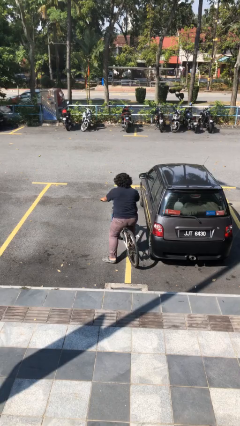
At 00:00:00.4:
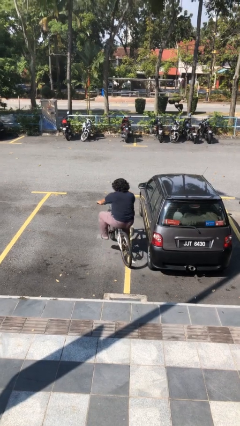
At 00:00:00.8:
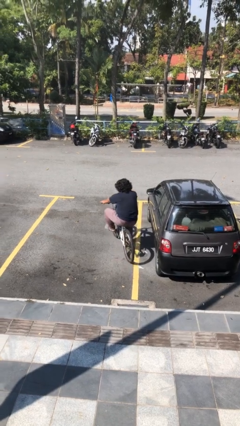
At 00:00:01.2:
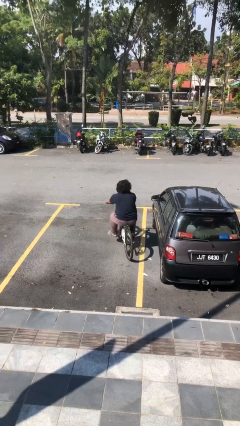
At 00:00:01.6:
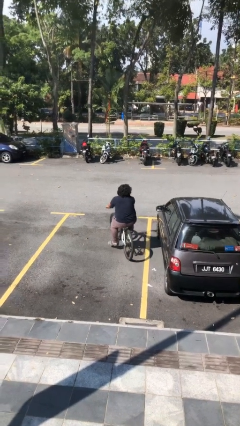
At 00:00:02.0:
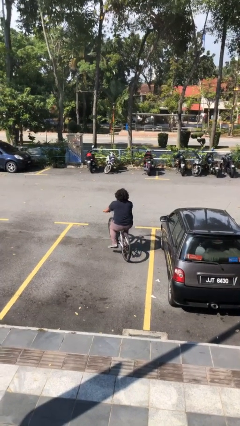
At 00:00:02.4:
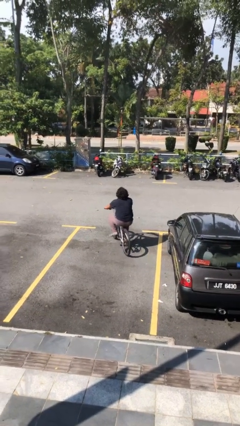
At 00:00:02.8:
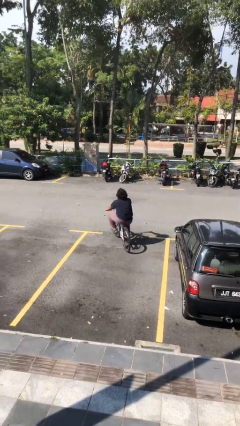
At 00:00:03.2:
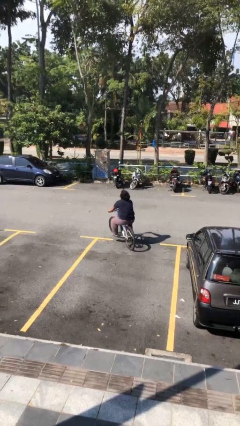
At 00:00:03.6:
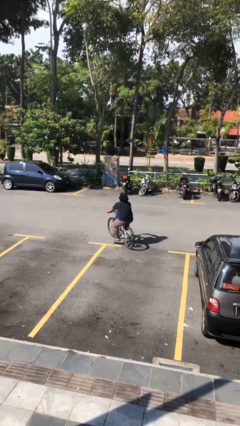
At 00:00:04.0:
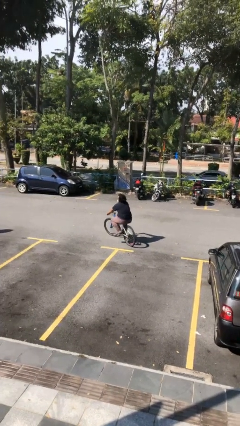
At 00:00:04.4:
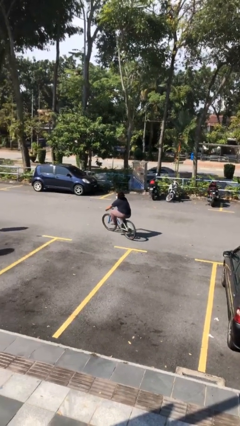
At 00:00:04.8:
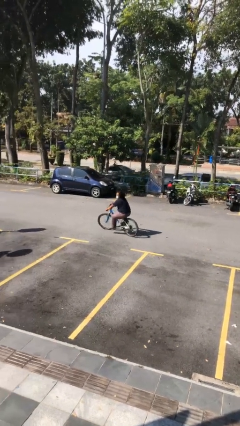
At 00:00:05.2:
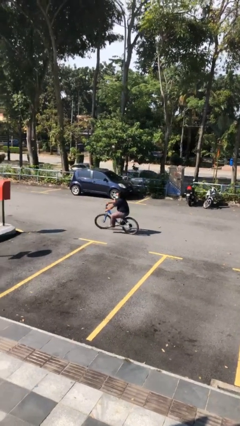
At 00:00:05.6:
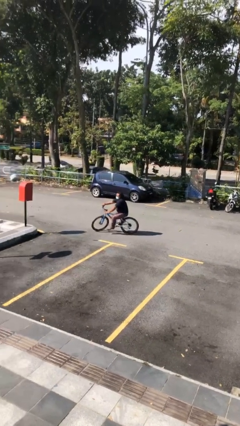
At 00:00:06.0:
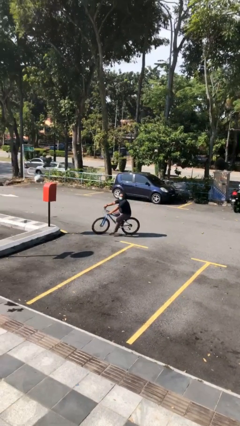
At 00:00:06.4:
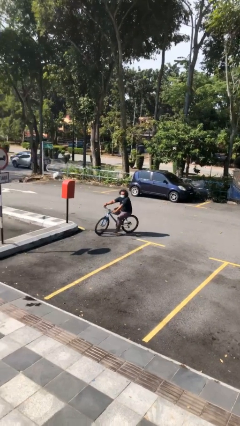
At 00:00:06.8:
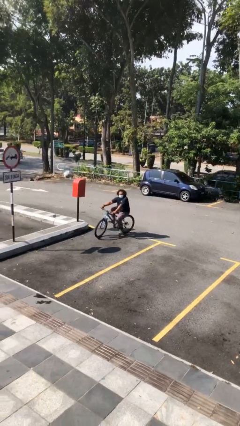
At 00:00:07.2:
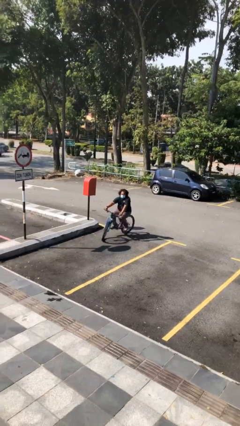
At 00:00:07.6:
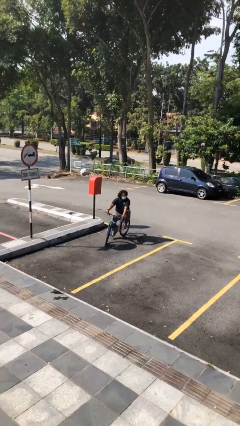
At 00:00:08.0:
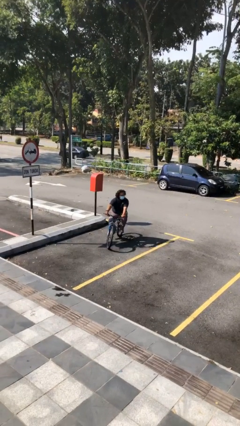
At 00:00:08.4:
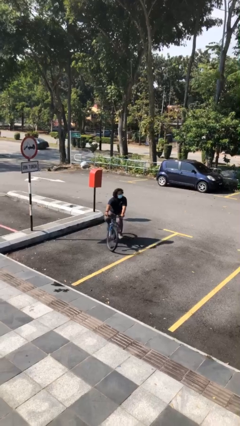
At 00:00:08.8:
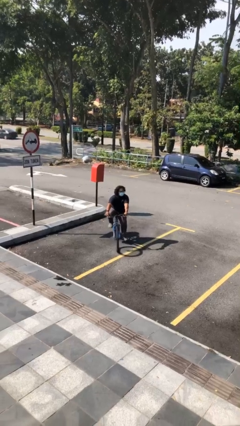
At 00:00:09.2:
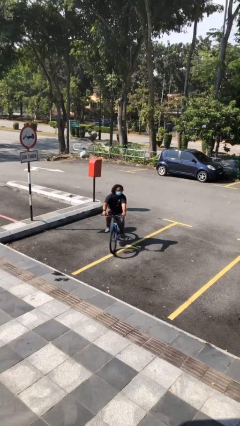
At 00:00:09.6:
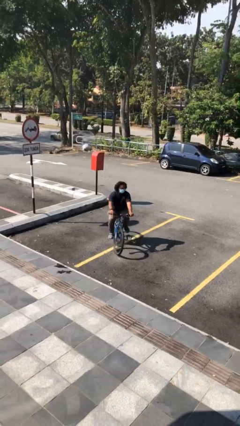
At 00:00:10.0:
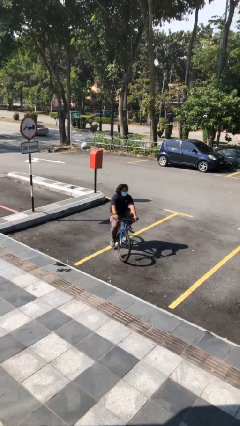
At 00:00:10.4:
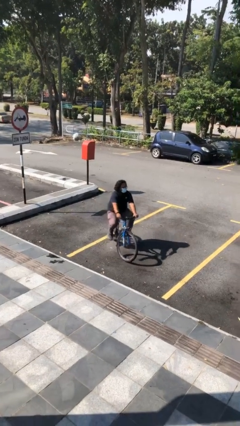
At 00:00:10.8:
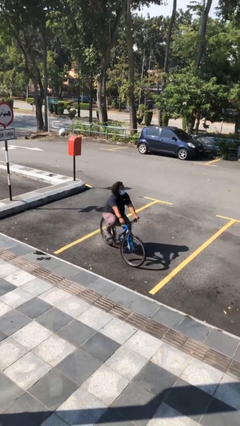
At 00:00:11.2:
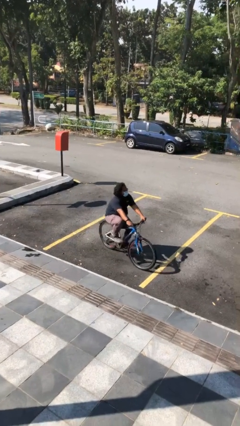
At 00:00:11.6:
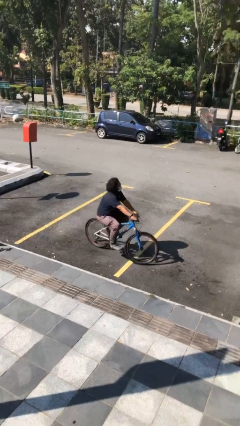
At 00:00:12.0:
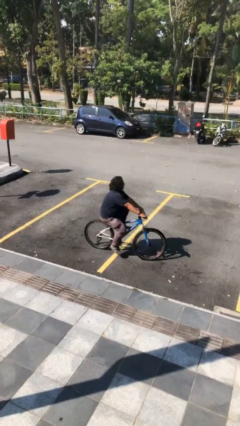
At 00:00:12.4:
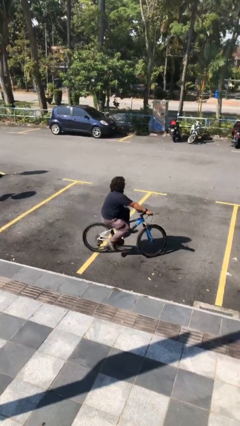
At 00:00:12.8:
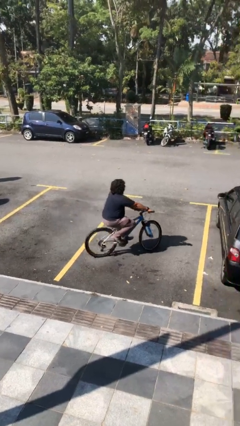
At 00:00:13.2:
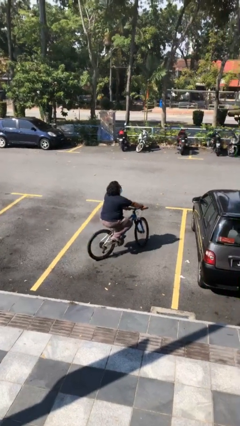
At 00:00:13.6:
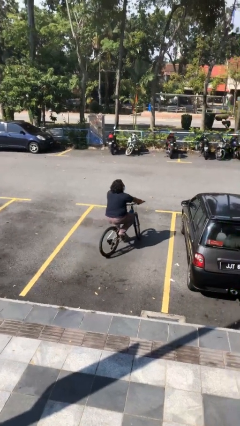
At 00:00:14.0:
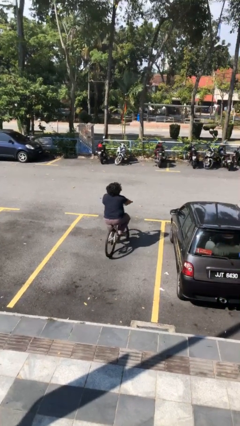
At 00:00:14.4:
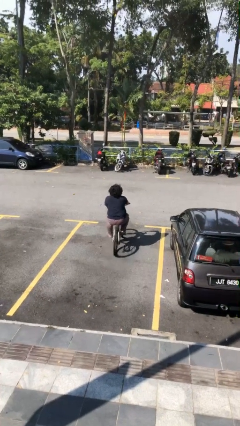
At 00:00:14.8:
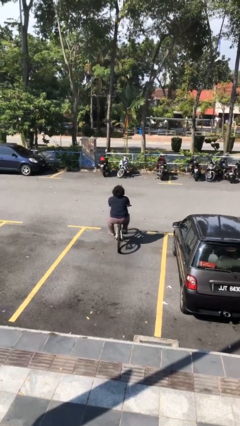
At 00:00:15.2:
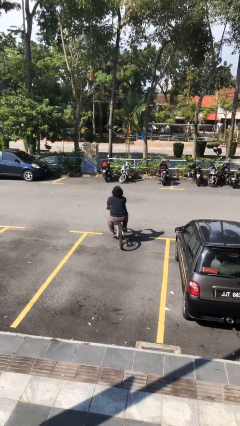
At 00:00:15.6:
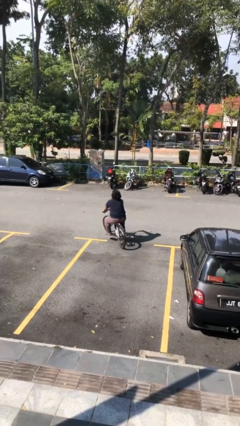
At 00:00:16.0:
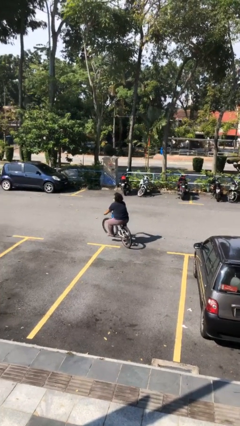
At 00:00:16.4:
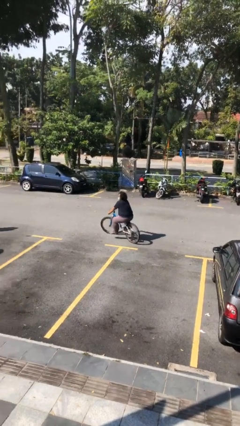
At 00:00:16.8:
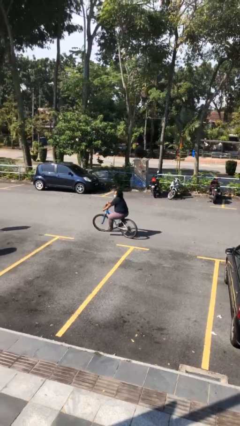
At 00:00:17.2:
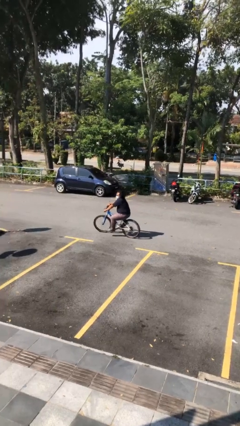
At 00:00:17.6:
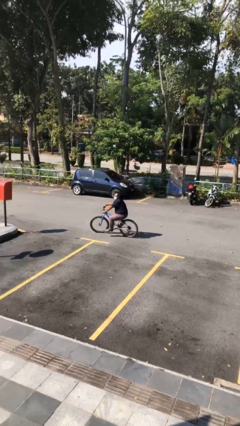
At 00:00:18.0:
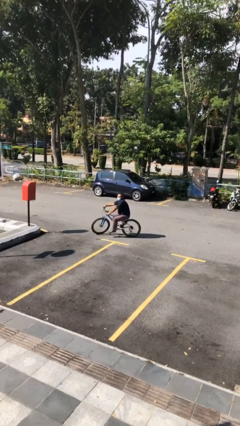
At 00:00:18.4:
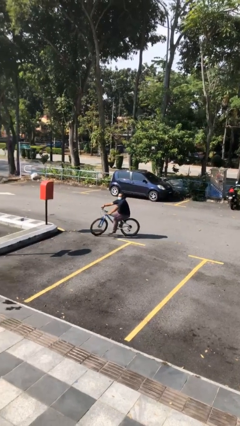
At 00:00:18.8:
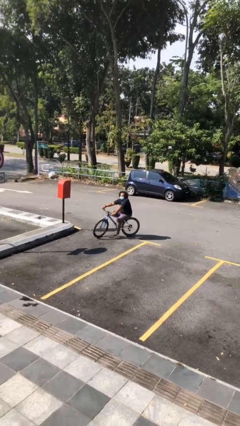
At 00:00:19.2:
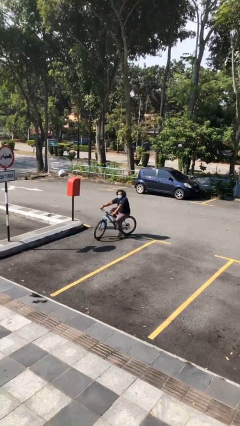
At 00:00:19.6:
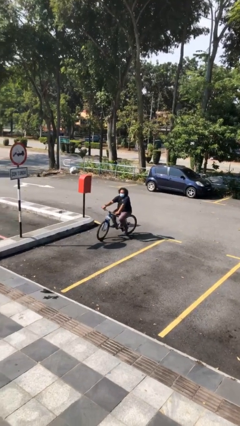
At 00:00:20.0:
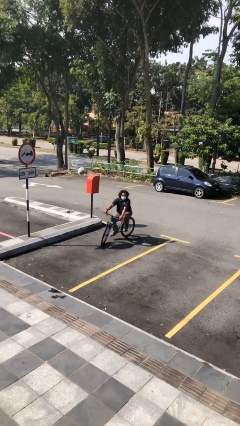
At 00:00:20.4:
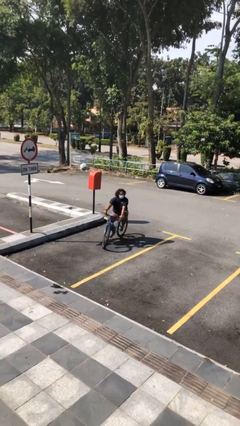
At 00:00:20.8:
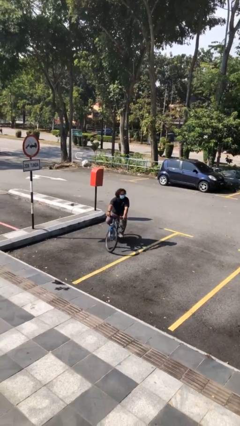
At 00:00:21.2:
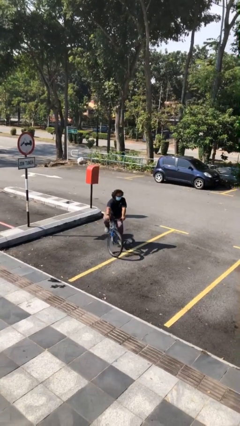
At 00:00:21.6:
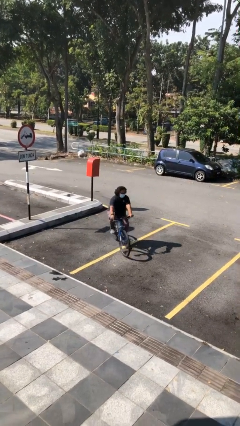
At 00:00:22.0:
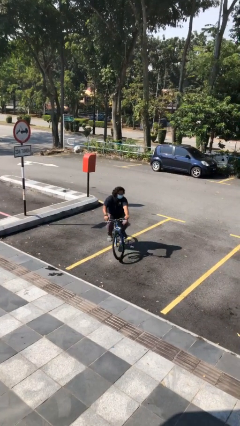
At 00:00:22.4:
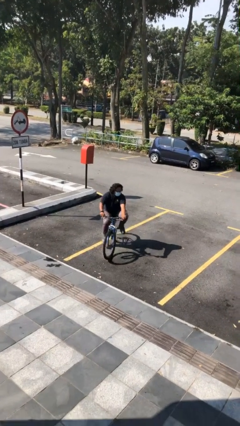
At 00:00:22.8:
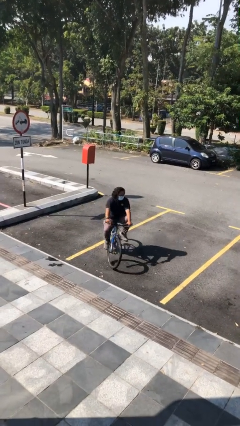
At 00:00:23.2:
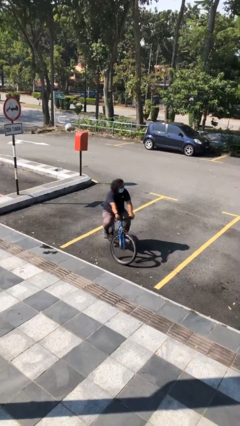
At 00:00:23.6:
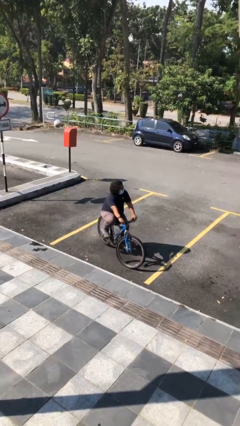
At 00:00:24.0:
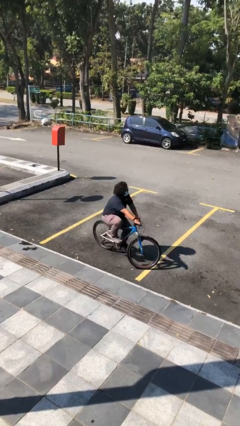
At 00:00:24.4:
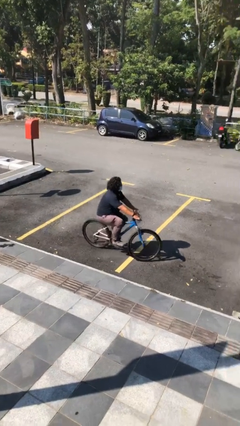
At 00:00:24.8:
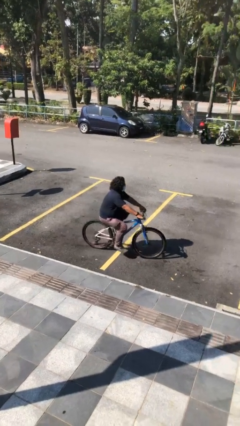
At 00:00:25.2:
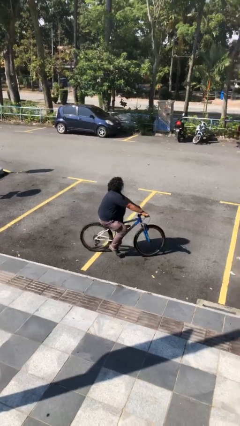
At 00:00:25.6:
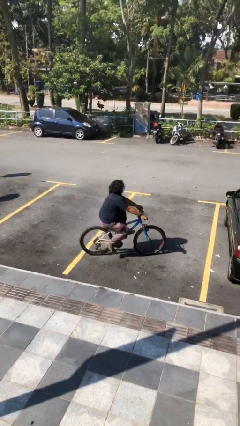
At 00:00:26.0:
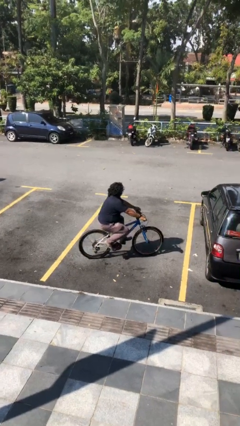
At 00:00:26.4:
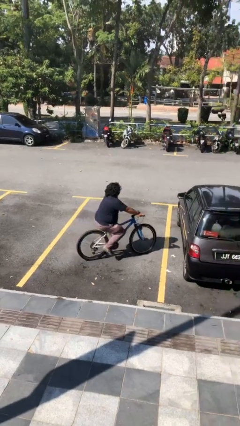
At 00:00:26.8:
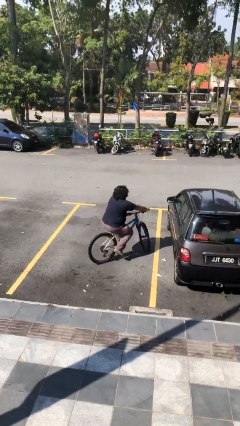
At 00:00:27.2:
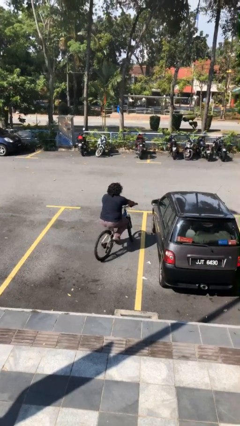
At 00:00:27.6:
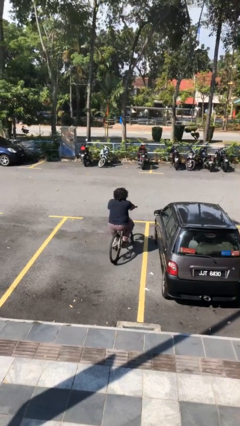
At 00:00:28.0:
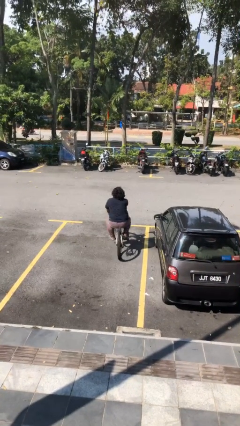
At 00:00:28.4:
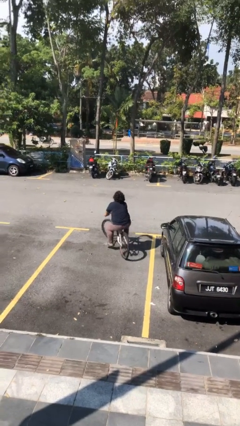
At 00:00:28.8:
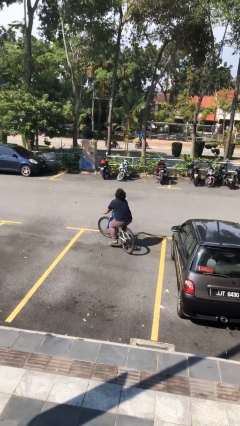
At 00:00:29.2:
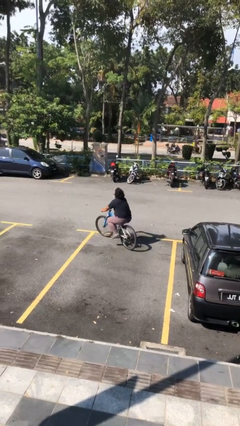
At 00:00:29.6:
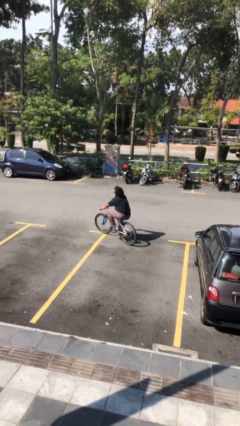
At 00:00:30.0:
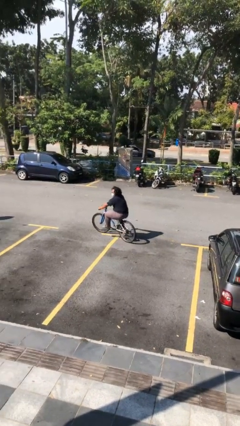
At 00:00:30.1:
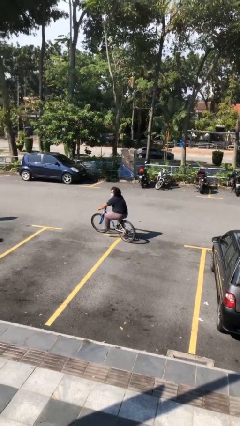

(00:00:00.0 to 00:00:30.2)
person rides bicycle

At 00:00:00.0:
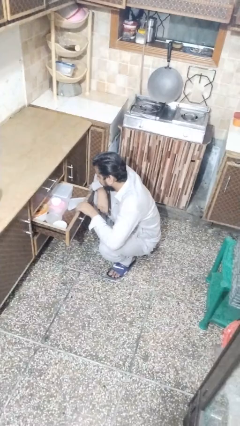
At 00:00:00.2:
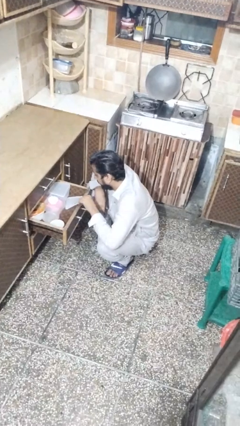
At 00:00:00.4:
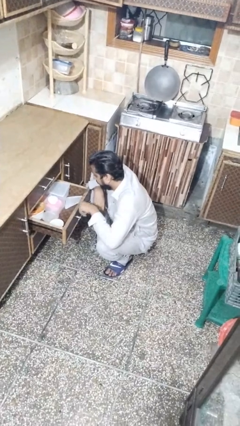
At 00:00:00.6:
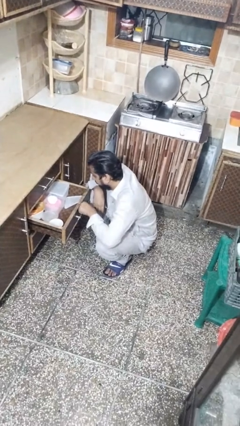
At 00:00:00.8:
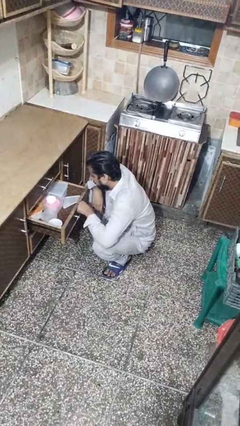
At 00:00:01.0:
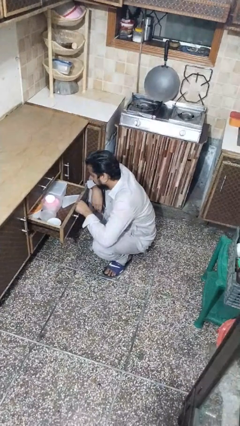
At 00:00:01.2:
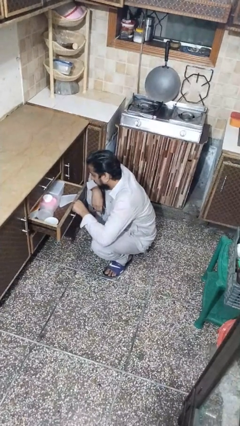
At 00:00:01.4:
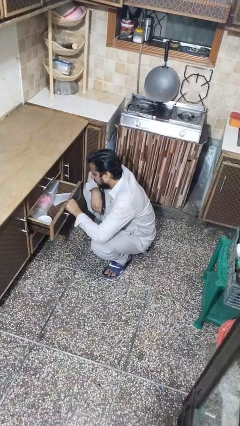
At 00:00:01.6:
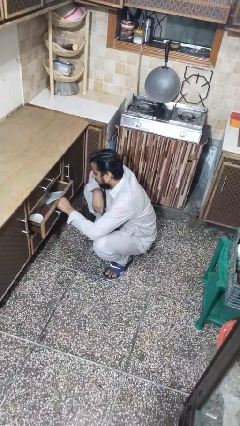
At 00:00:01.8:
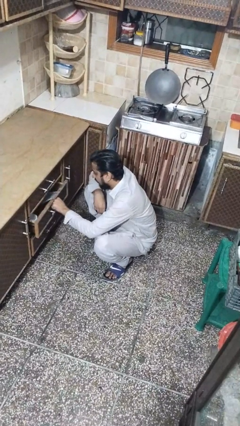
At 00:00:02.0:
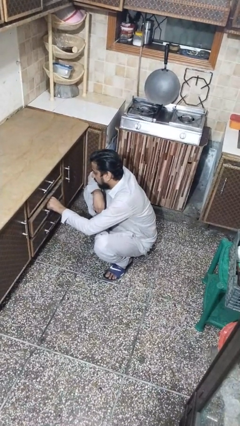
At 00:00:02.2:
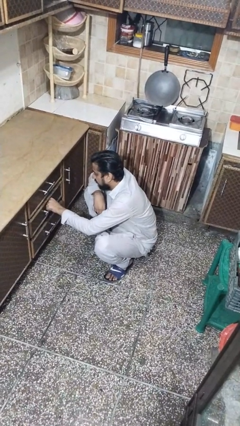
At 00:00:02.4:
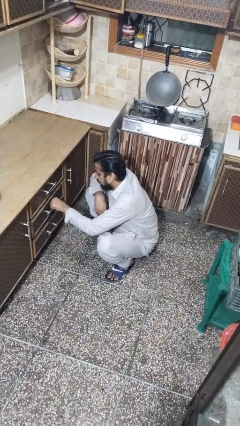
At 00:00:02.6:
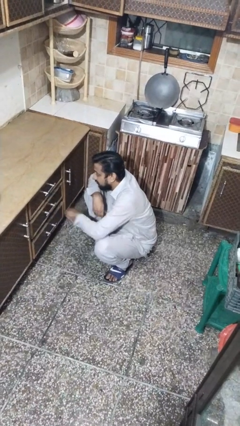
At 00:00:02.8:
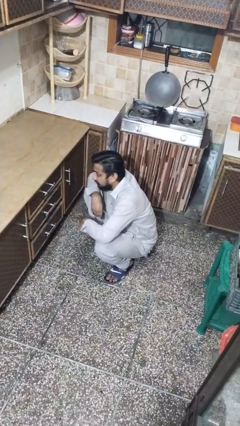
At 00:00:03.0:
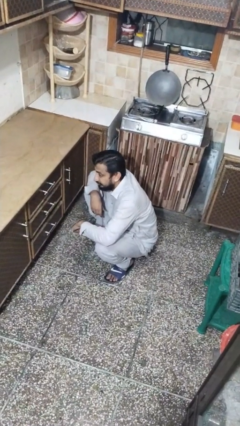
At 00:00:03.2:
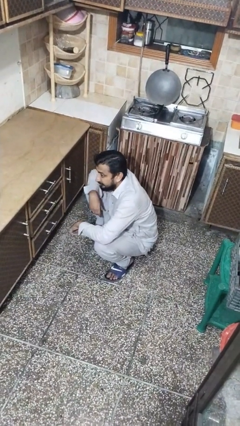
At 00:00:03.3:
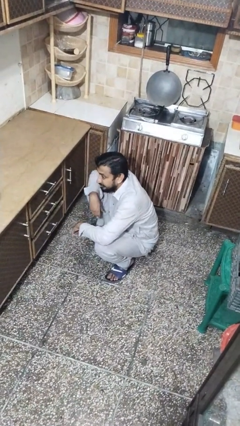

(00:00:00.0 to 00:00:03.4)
person closes kitchen drawer
